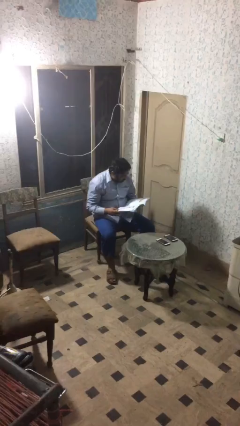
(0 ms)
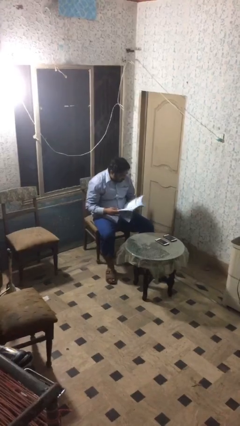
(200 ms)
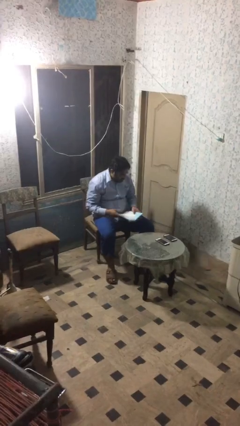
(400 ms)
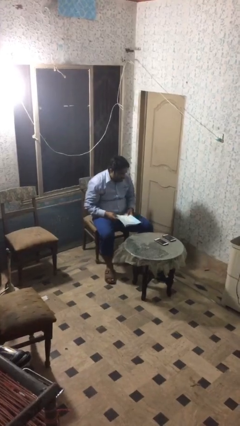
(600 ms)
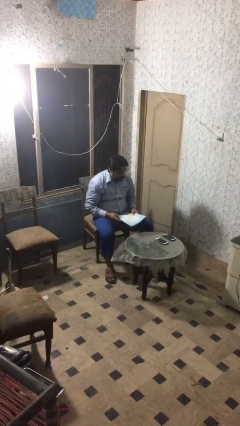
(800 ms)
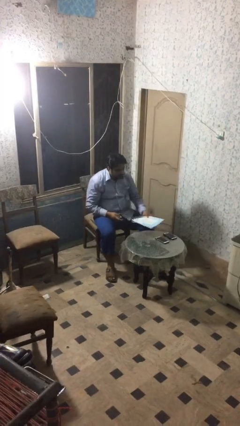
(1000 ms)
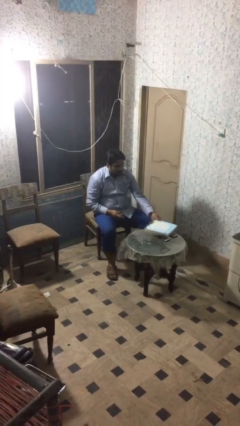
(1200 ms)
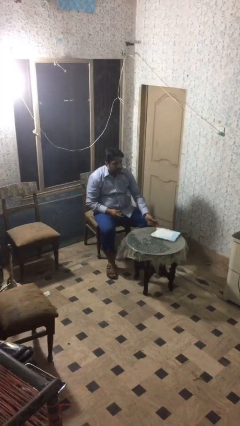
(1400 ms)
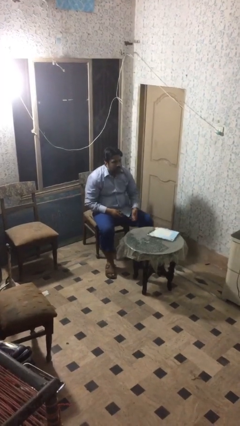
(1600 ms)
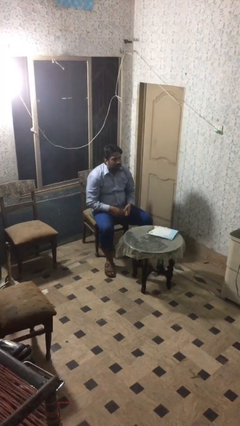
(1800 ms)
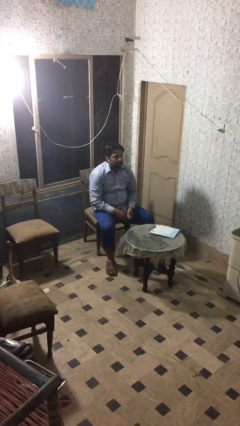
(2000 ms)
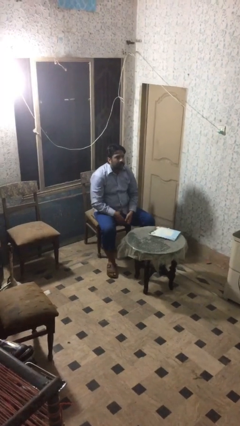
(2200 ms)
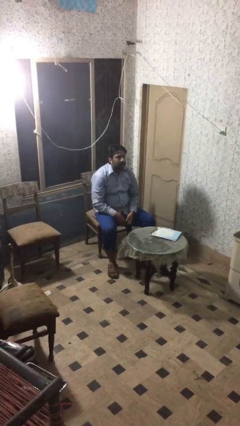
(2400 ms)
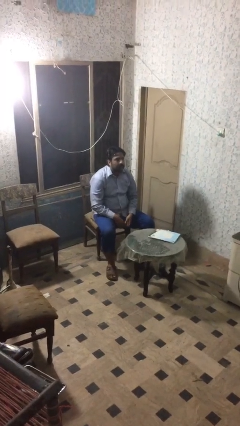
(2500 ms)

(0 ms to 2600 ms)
person puts down object on table

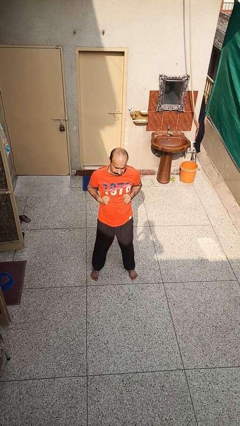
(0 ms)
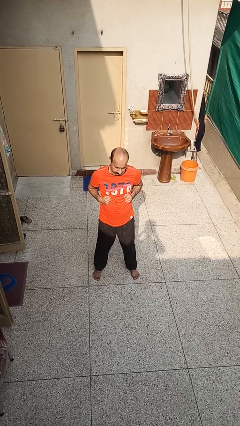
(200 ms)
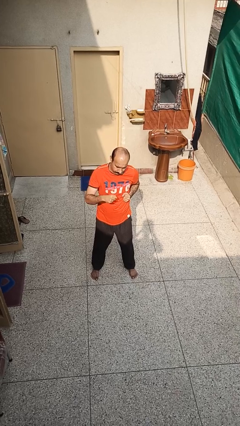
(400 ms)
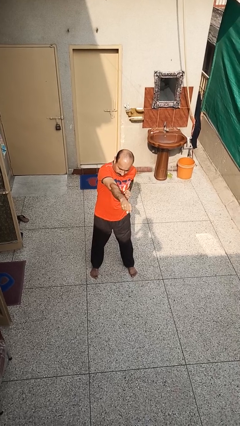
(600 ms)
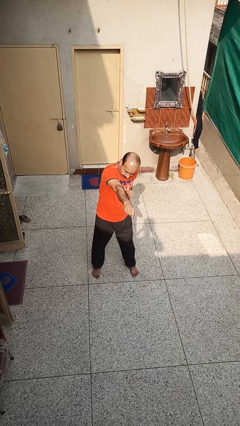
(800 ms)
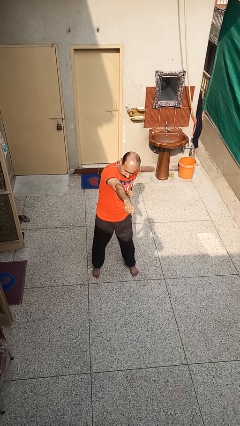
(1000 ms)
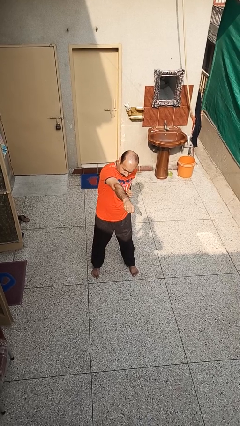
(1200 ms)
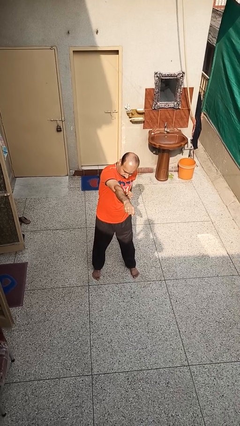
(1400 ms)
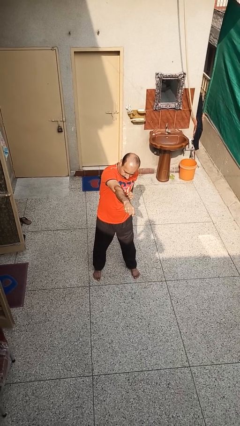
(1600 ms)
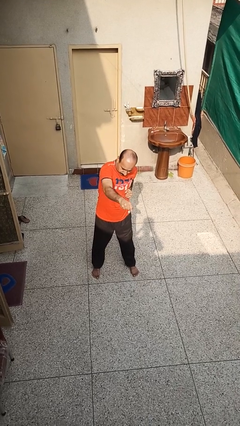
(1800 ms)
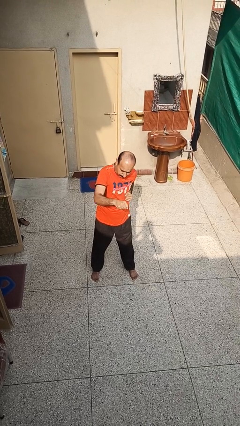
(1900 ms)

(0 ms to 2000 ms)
person punches

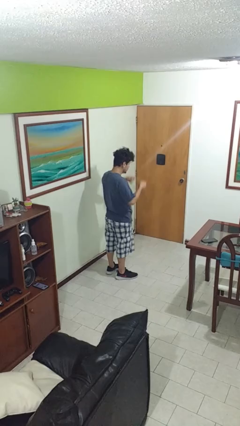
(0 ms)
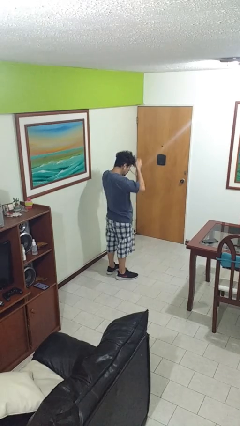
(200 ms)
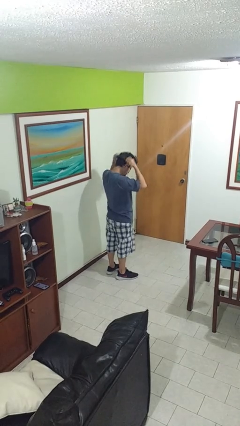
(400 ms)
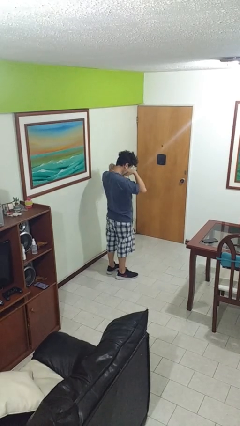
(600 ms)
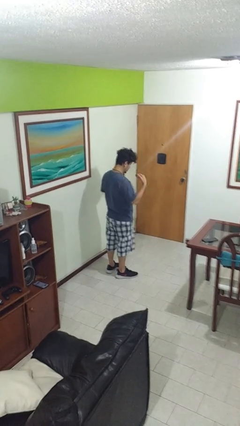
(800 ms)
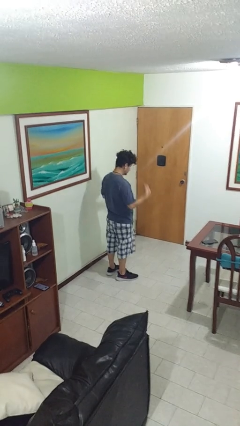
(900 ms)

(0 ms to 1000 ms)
person puts on necklace

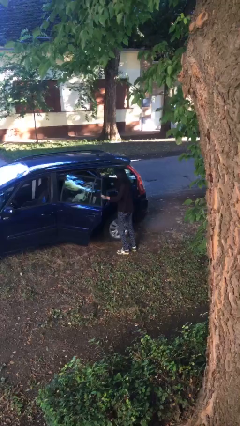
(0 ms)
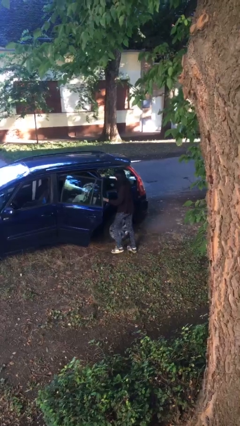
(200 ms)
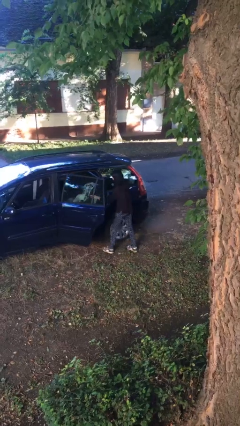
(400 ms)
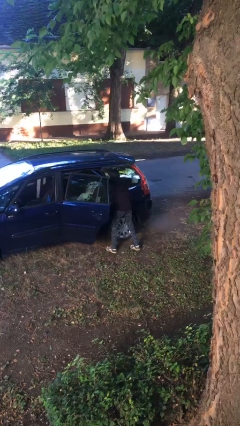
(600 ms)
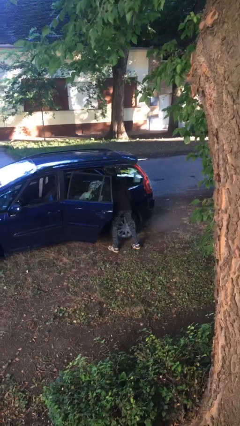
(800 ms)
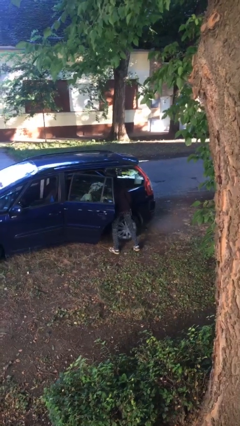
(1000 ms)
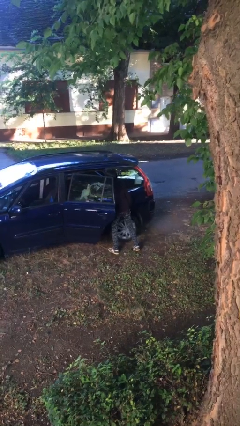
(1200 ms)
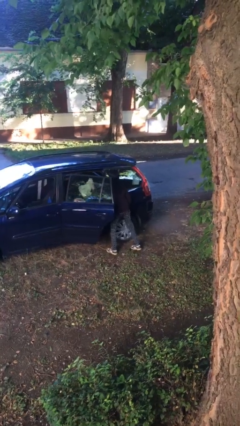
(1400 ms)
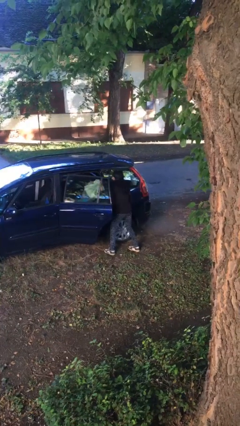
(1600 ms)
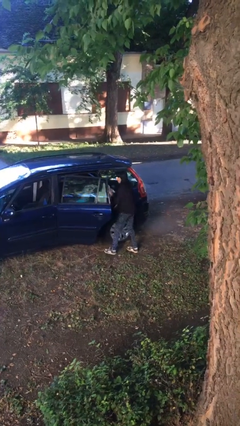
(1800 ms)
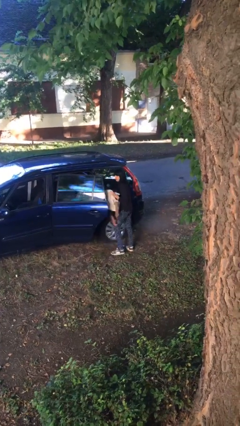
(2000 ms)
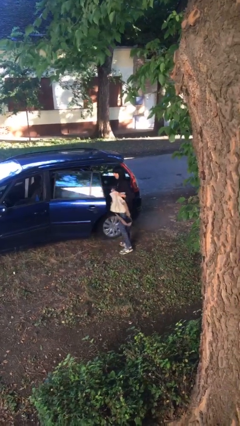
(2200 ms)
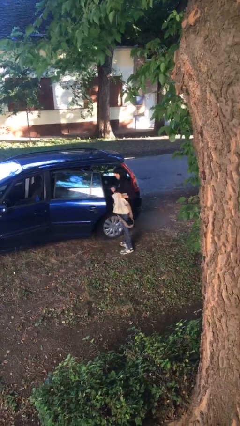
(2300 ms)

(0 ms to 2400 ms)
person unloads car

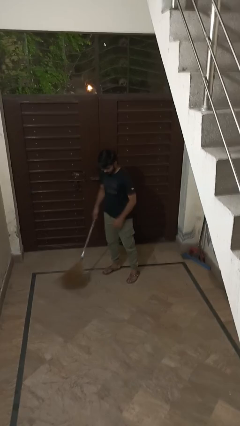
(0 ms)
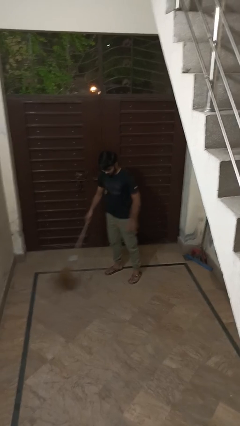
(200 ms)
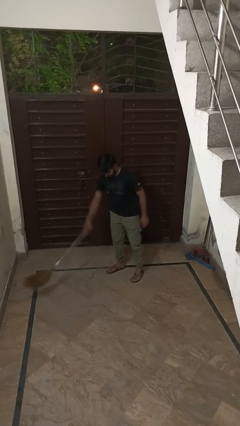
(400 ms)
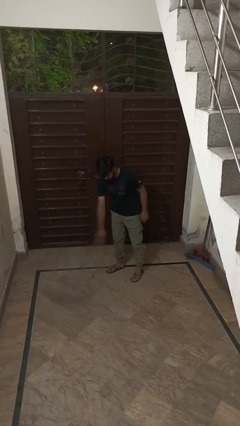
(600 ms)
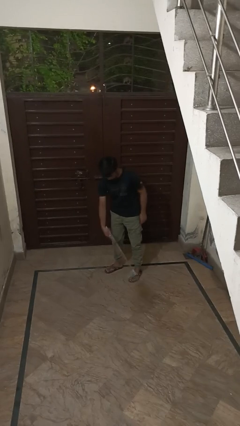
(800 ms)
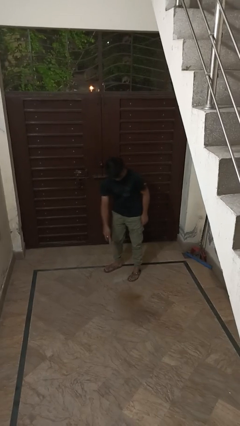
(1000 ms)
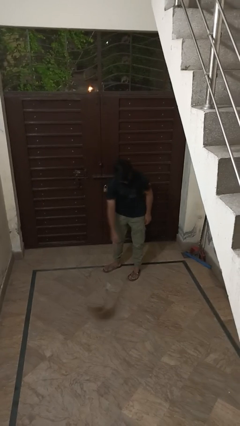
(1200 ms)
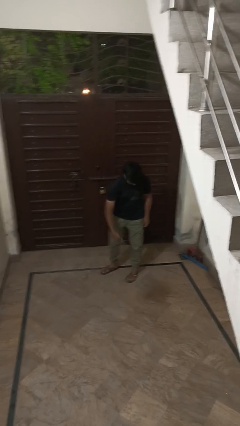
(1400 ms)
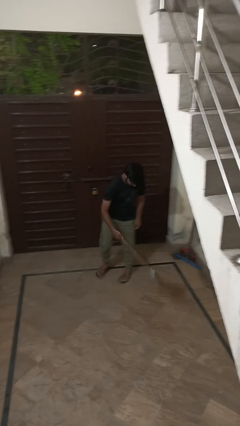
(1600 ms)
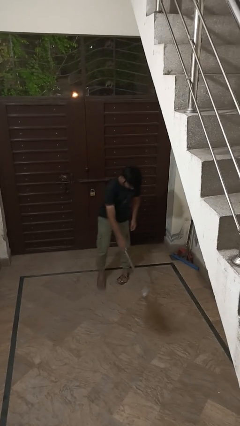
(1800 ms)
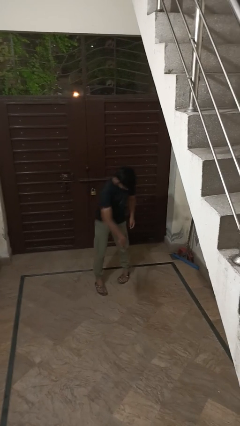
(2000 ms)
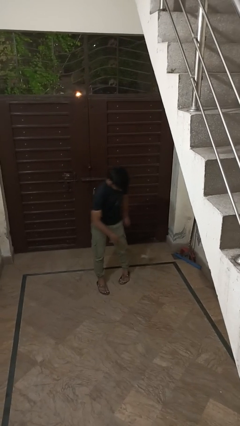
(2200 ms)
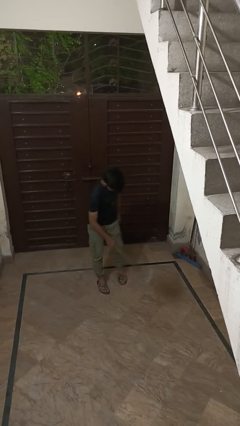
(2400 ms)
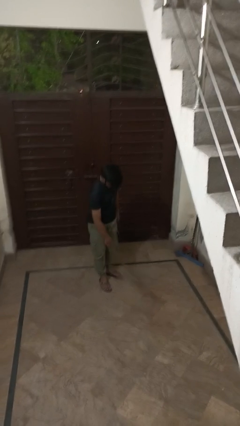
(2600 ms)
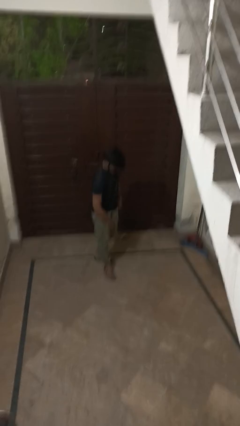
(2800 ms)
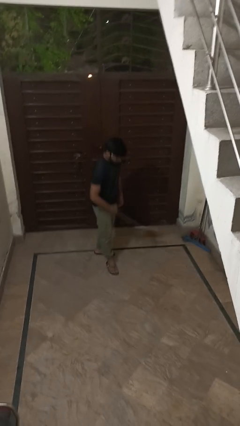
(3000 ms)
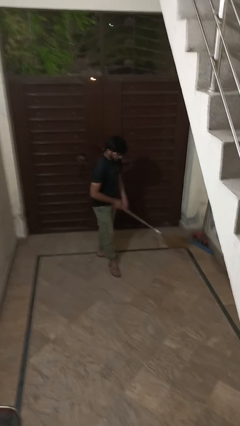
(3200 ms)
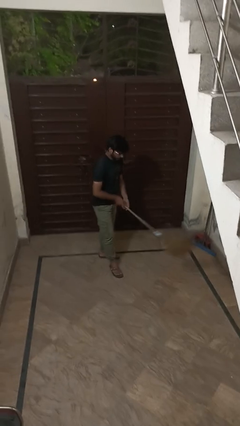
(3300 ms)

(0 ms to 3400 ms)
person sweeps floor

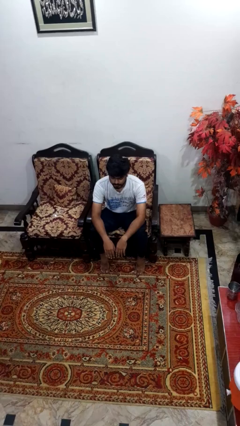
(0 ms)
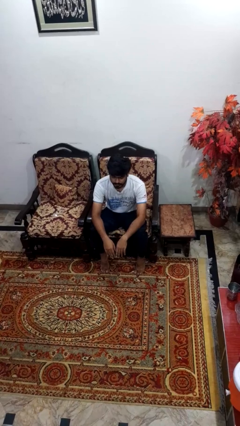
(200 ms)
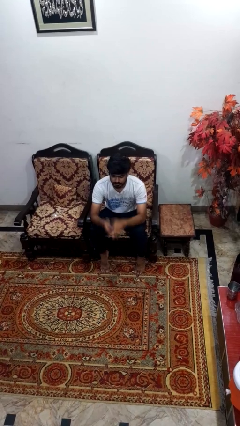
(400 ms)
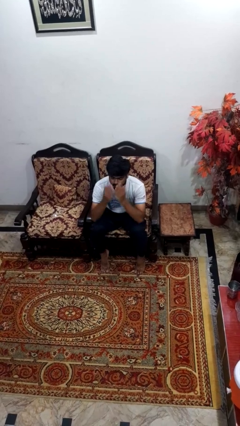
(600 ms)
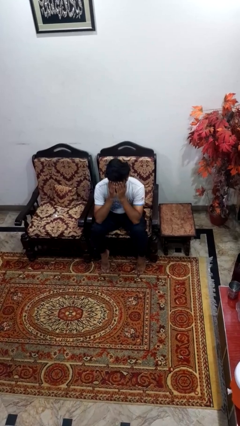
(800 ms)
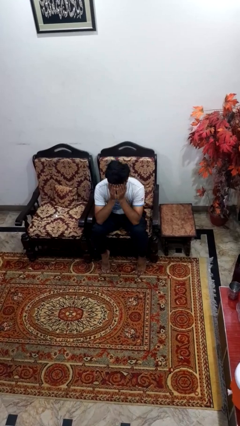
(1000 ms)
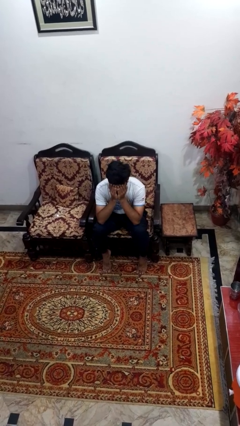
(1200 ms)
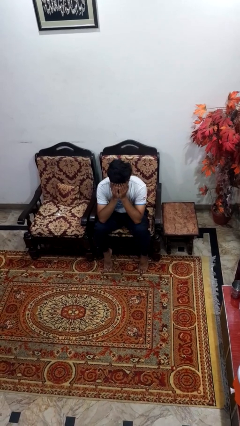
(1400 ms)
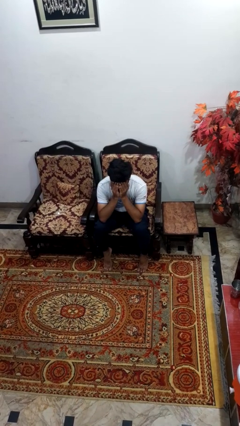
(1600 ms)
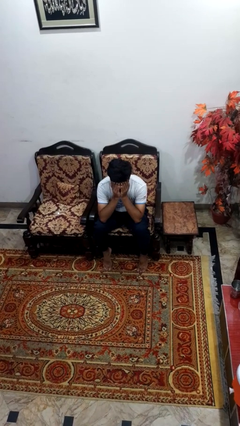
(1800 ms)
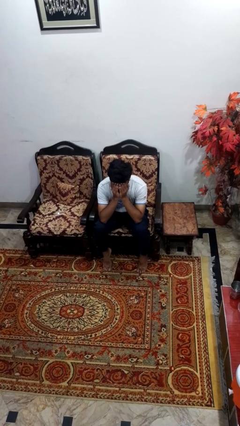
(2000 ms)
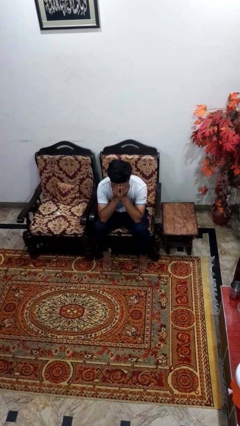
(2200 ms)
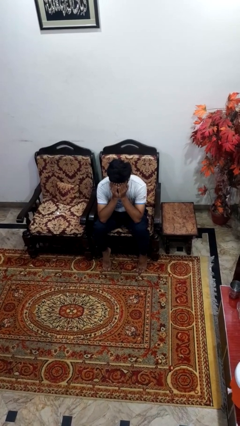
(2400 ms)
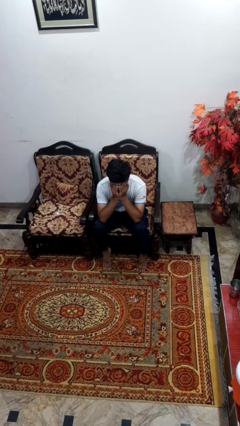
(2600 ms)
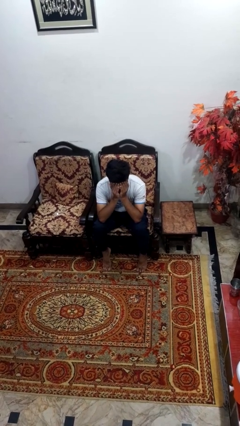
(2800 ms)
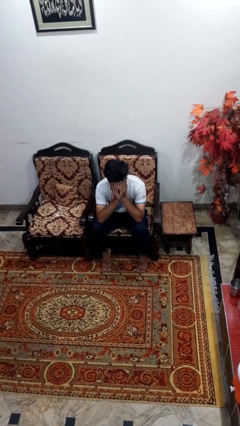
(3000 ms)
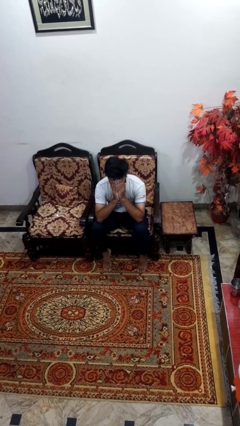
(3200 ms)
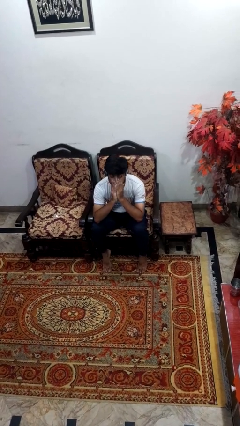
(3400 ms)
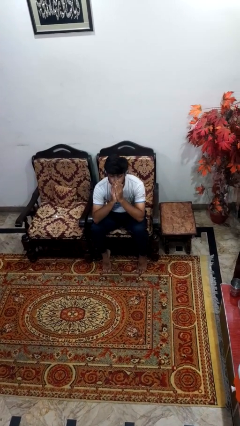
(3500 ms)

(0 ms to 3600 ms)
person covers face with hands

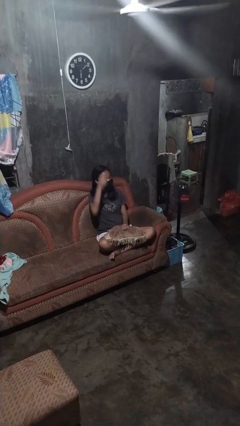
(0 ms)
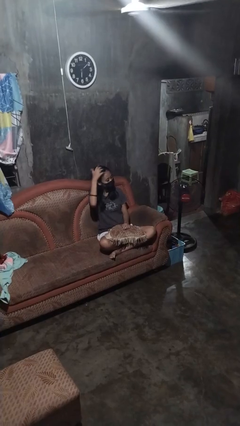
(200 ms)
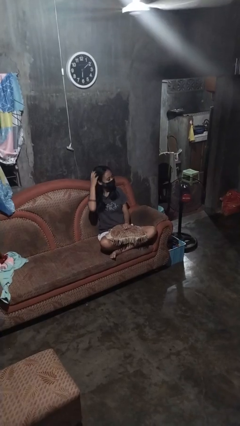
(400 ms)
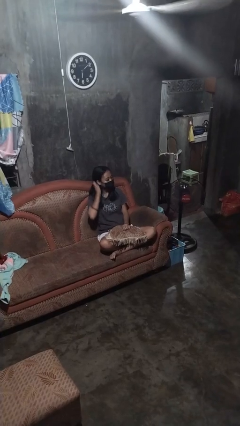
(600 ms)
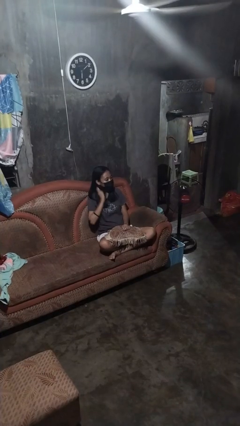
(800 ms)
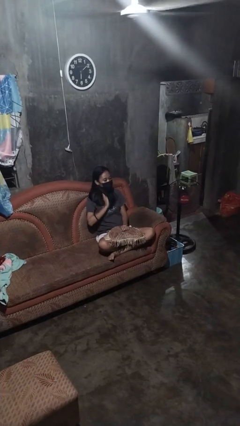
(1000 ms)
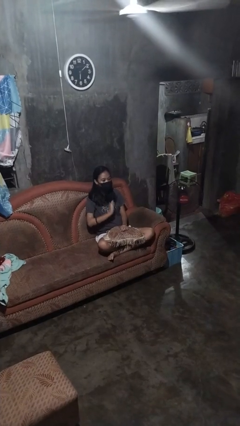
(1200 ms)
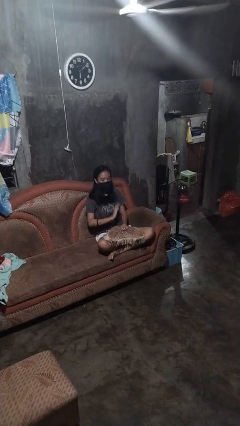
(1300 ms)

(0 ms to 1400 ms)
person strokes hair

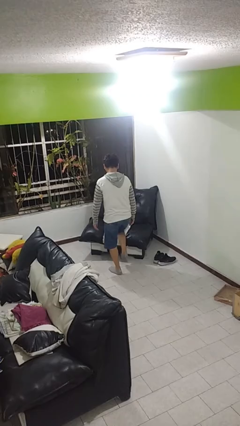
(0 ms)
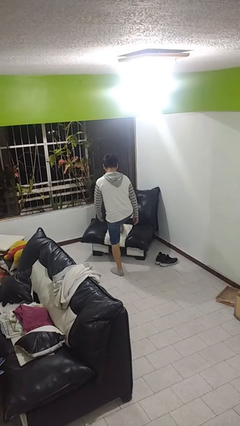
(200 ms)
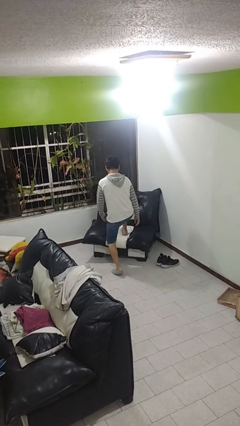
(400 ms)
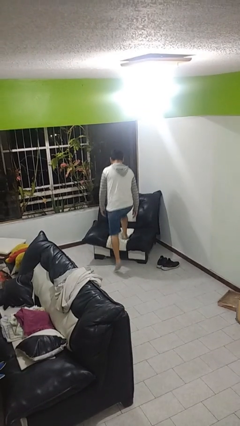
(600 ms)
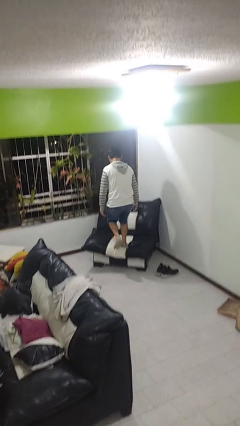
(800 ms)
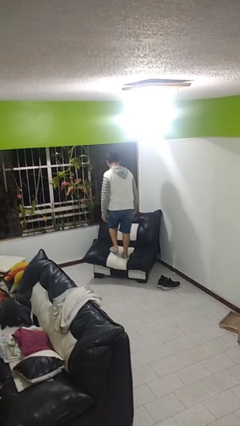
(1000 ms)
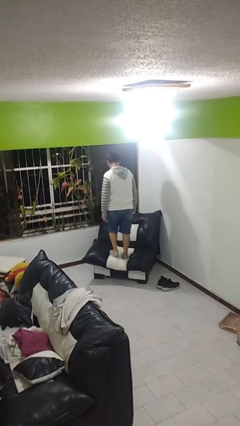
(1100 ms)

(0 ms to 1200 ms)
person climbs on couch
